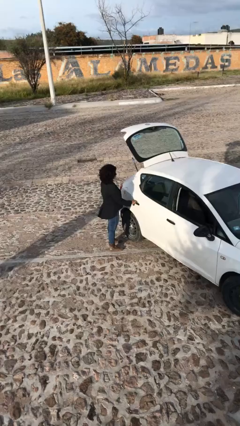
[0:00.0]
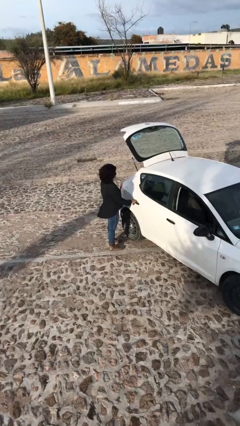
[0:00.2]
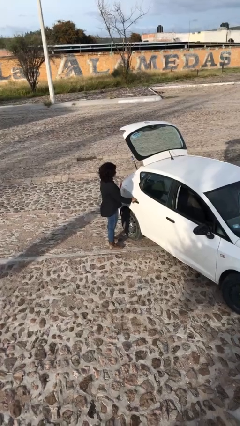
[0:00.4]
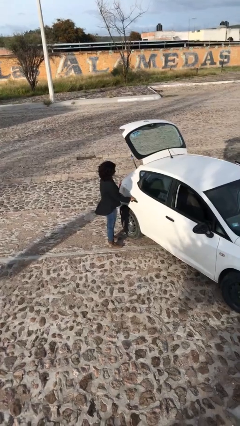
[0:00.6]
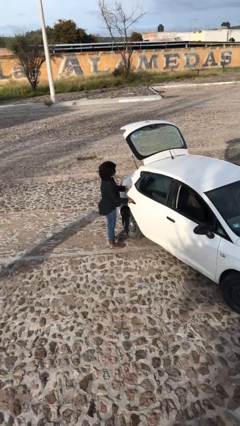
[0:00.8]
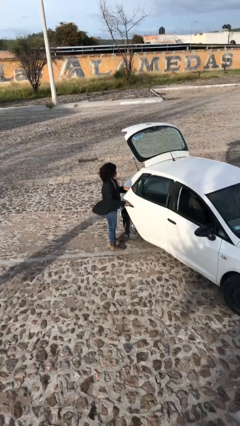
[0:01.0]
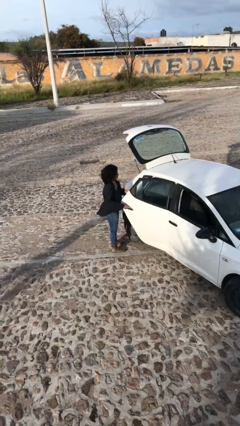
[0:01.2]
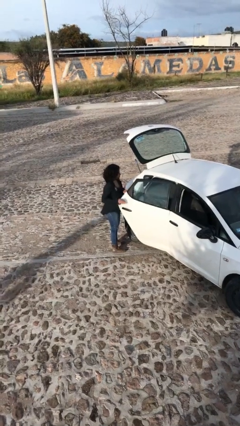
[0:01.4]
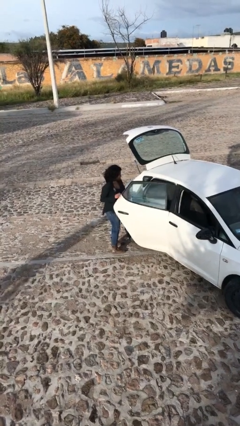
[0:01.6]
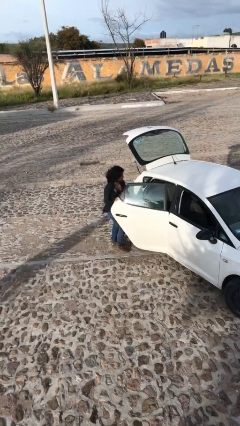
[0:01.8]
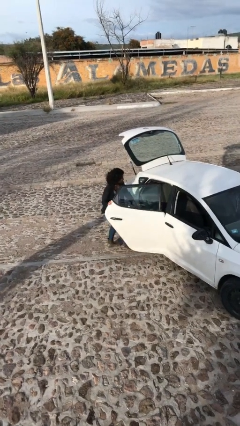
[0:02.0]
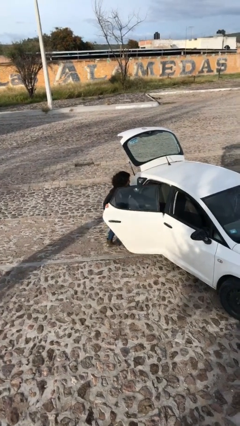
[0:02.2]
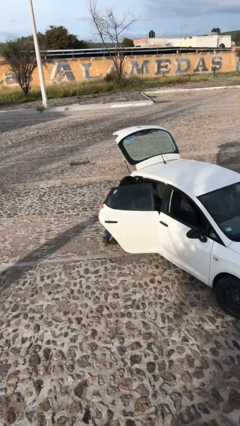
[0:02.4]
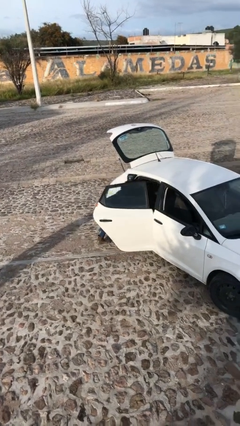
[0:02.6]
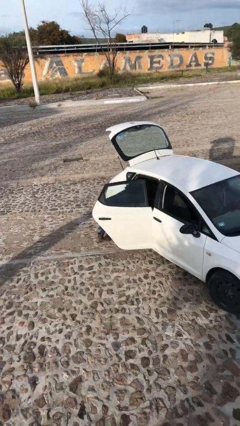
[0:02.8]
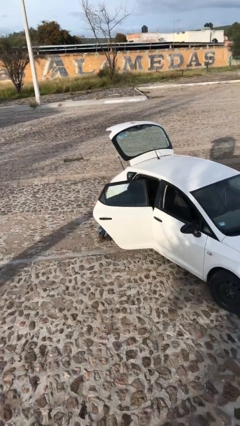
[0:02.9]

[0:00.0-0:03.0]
person opens car door

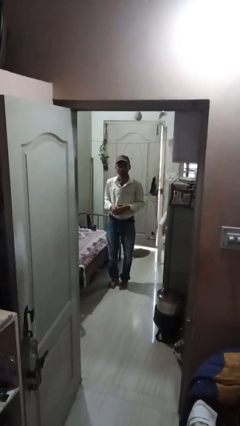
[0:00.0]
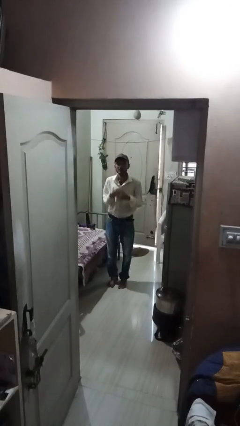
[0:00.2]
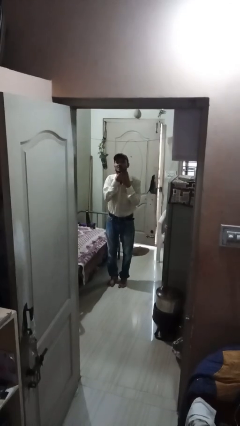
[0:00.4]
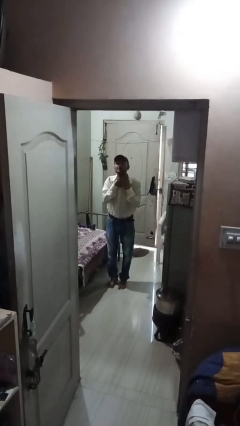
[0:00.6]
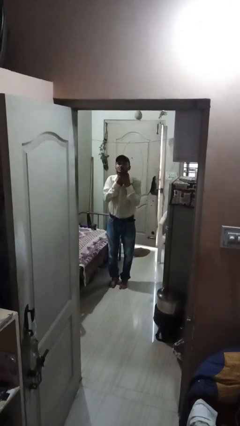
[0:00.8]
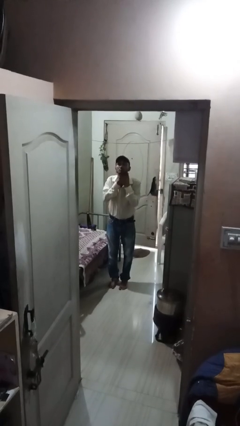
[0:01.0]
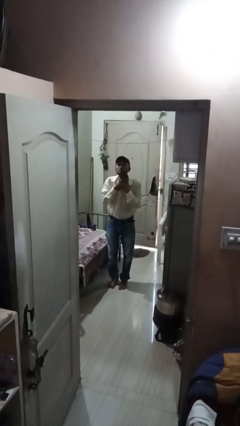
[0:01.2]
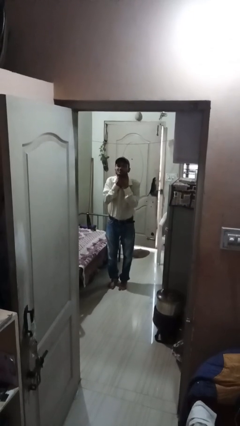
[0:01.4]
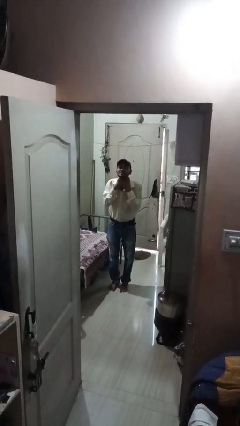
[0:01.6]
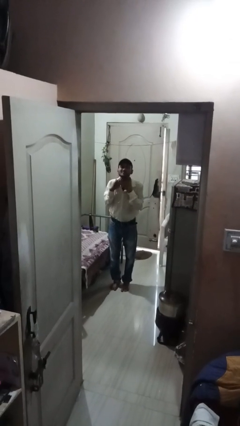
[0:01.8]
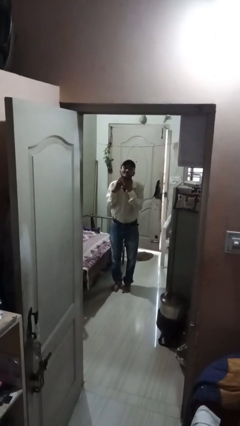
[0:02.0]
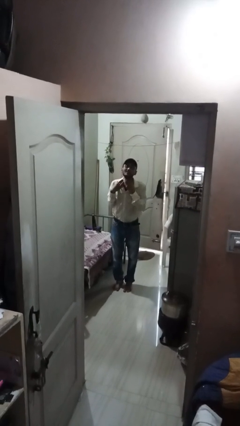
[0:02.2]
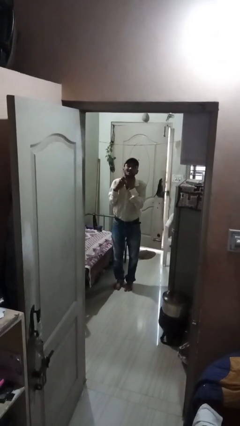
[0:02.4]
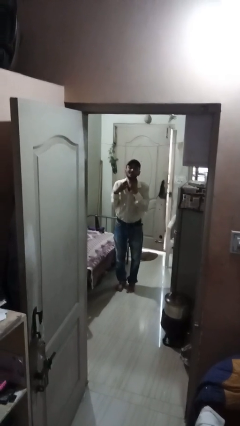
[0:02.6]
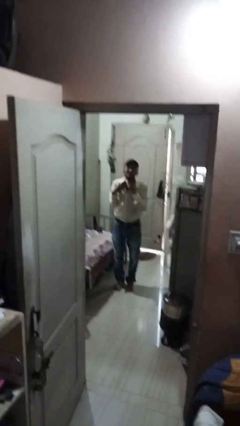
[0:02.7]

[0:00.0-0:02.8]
person rubs neck

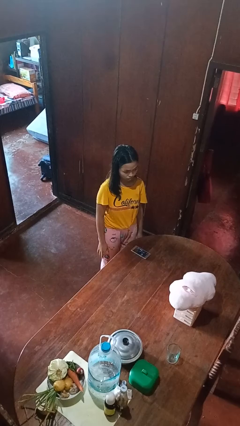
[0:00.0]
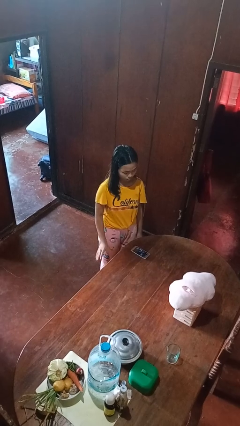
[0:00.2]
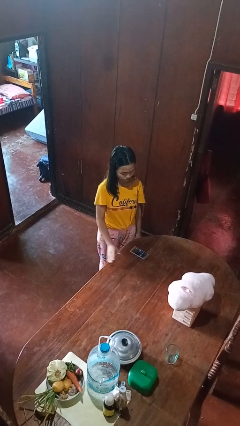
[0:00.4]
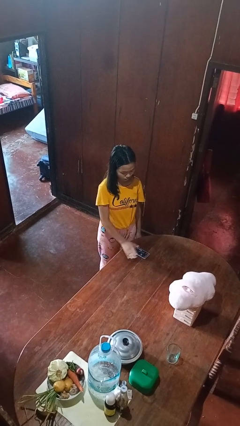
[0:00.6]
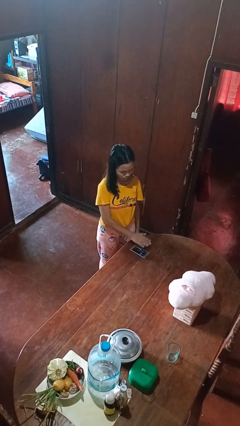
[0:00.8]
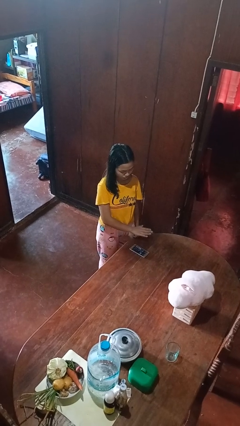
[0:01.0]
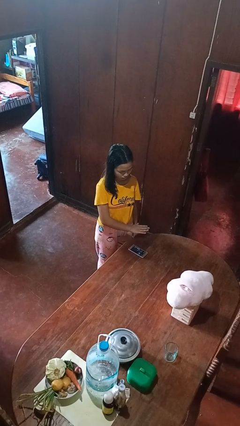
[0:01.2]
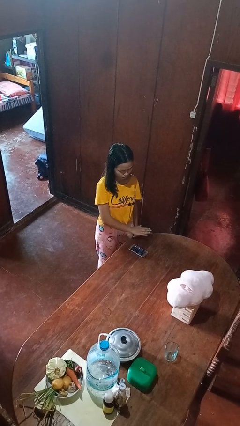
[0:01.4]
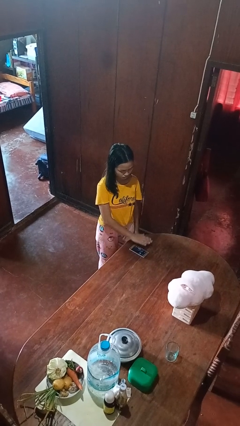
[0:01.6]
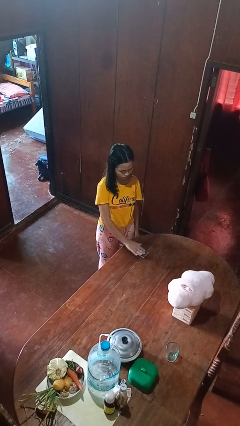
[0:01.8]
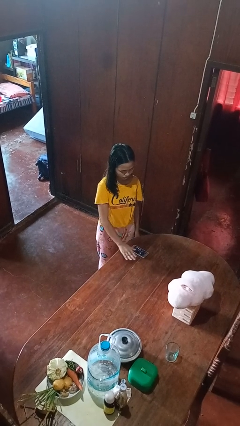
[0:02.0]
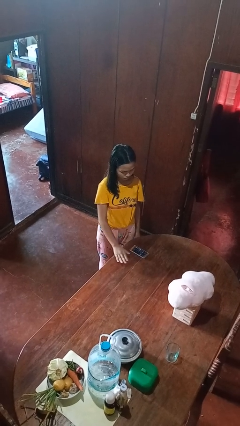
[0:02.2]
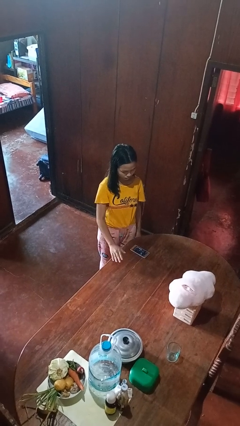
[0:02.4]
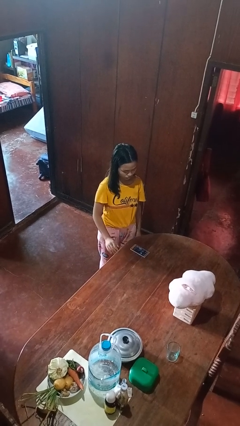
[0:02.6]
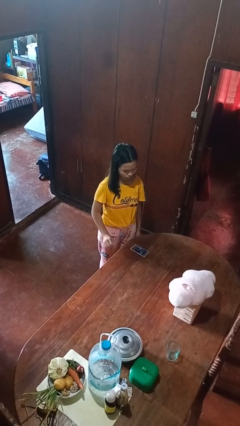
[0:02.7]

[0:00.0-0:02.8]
person waves hand over object

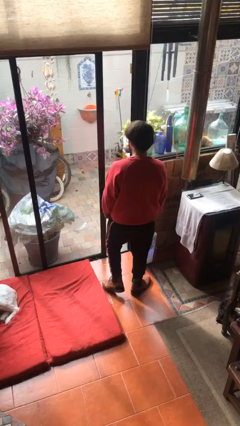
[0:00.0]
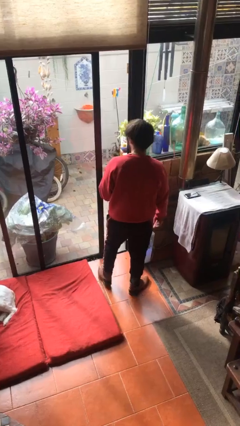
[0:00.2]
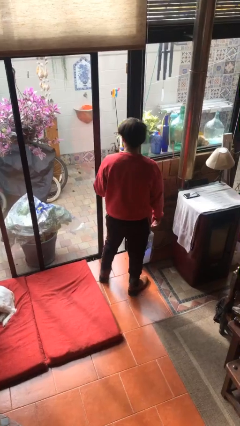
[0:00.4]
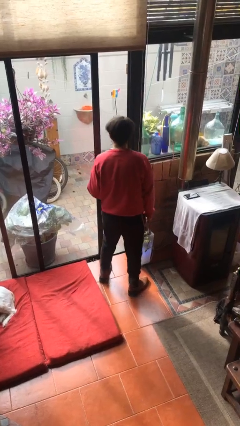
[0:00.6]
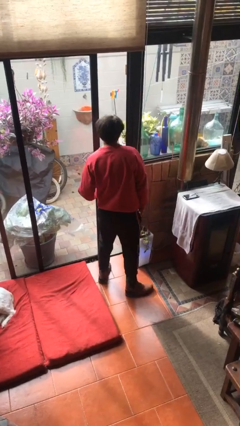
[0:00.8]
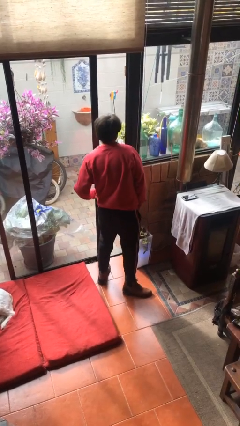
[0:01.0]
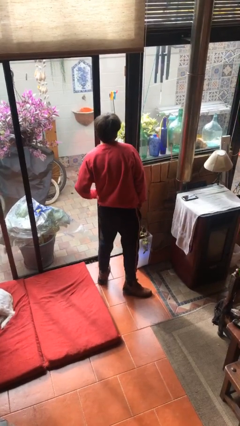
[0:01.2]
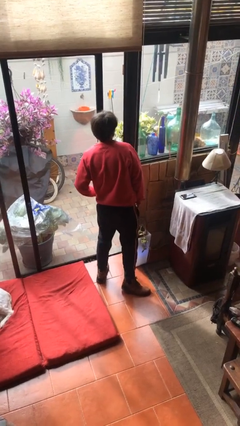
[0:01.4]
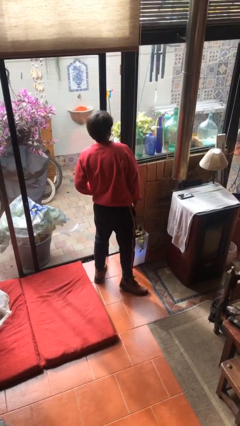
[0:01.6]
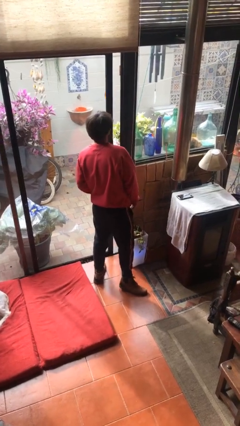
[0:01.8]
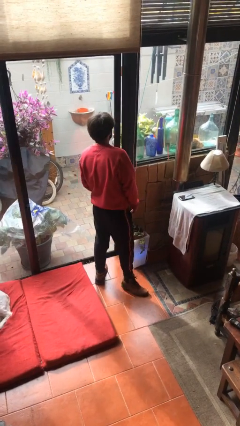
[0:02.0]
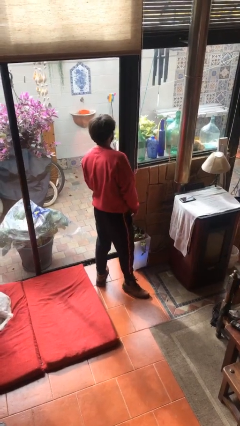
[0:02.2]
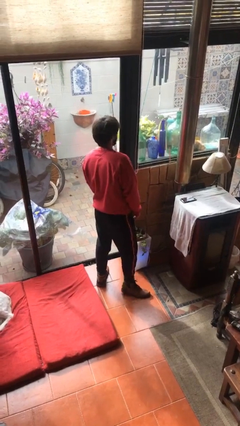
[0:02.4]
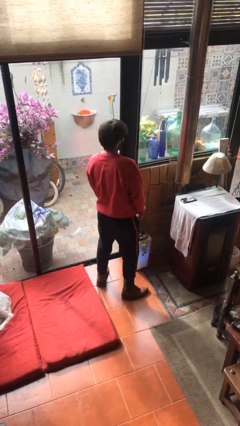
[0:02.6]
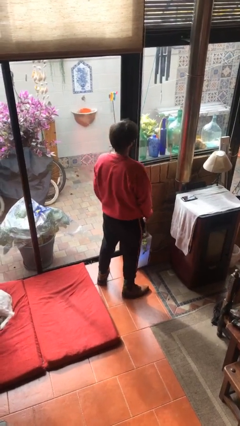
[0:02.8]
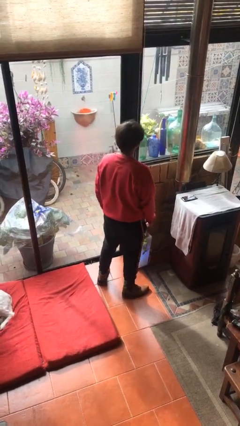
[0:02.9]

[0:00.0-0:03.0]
person closes sliding door

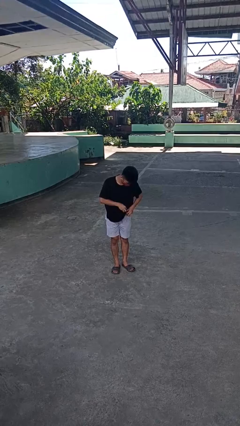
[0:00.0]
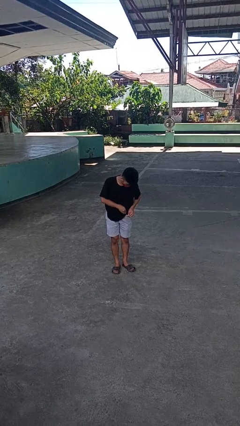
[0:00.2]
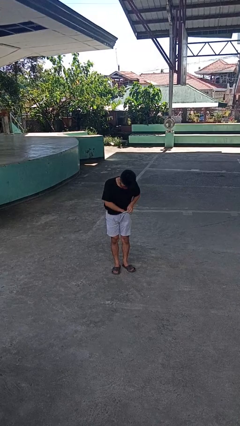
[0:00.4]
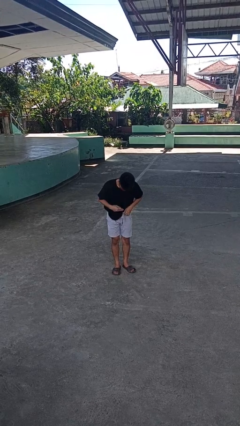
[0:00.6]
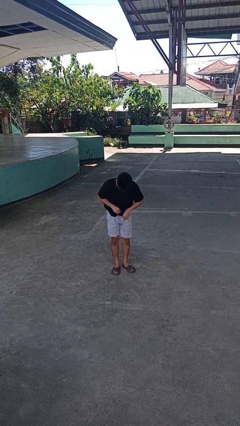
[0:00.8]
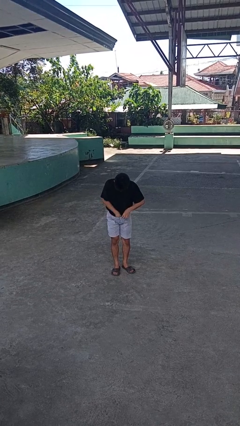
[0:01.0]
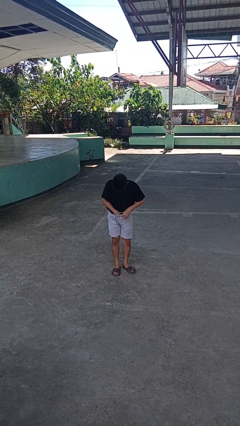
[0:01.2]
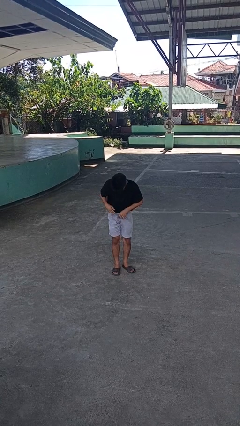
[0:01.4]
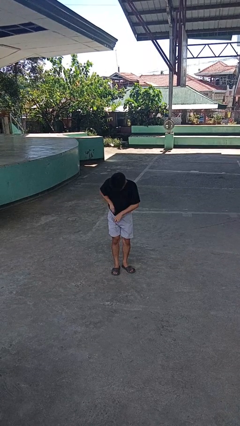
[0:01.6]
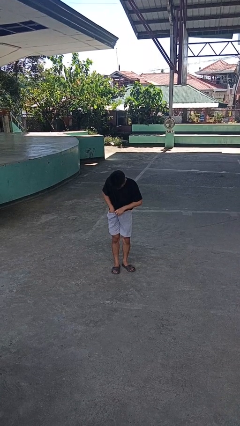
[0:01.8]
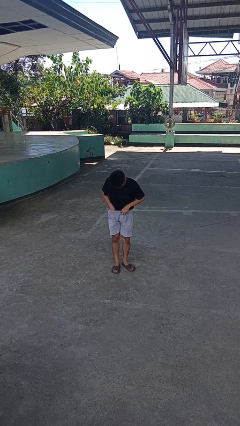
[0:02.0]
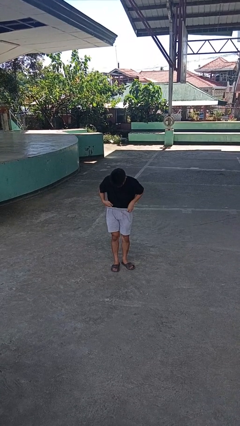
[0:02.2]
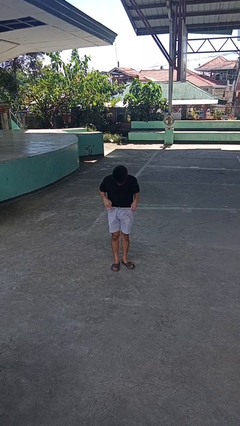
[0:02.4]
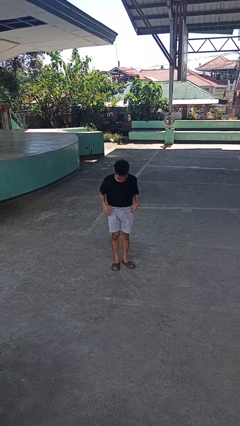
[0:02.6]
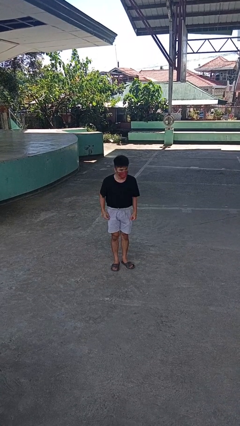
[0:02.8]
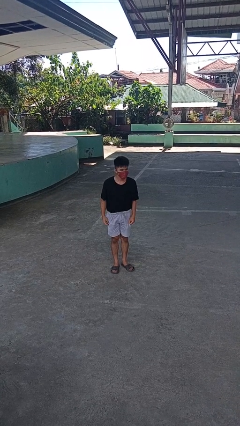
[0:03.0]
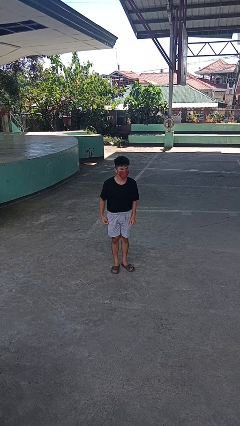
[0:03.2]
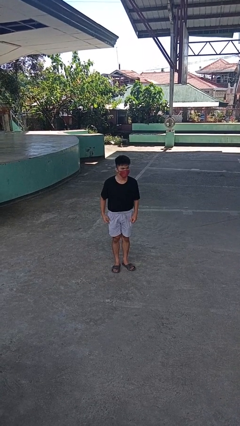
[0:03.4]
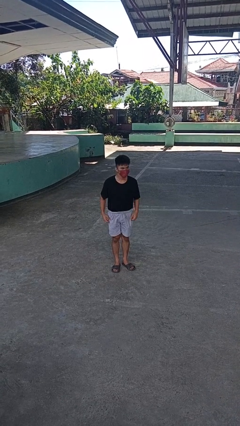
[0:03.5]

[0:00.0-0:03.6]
person tucks in shirt

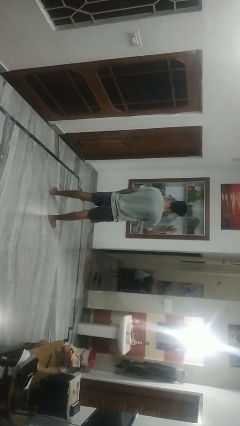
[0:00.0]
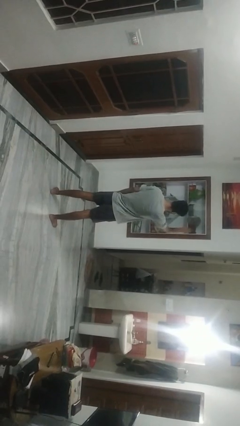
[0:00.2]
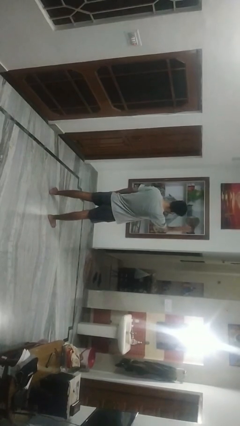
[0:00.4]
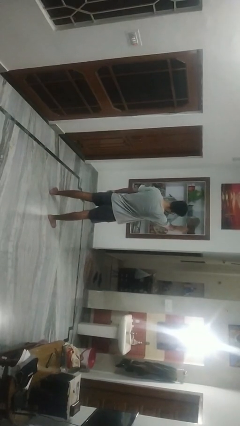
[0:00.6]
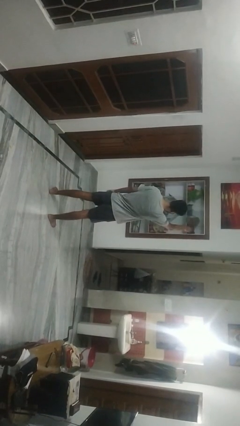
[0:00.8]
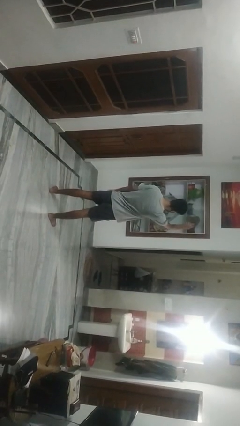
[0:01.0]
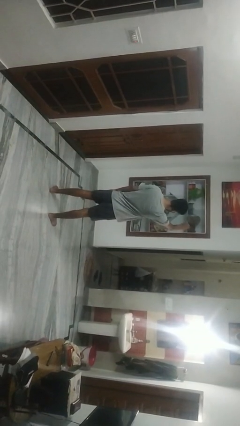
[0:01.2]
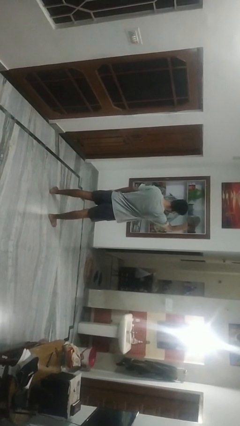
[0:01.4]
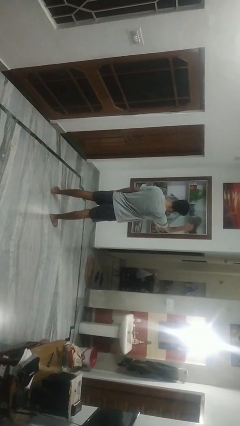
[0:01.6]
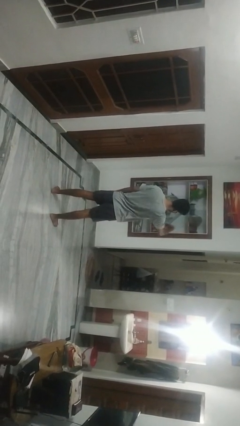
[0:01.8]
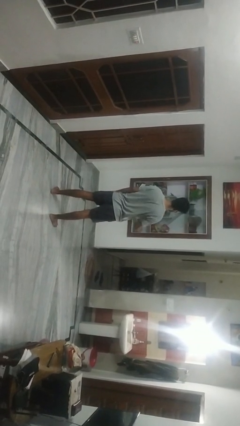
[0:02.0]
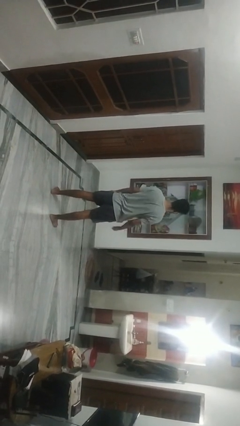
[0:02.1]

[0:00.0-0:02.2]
person gestures come here

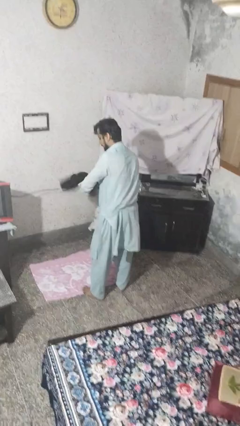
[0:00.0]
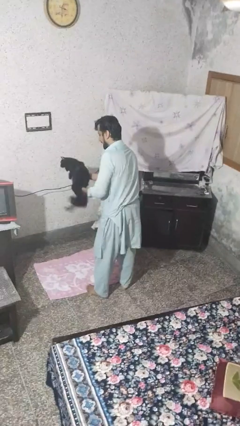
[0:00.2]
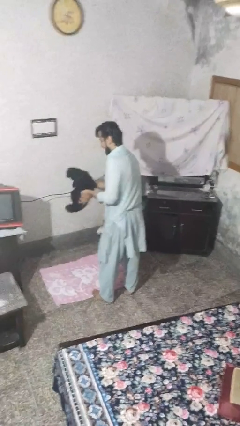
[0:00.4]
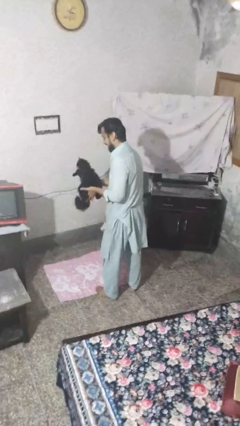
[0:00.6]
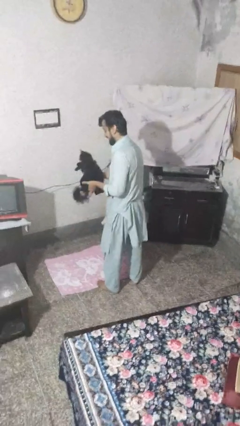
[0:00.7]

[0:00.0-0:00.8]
person pets cat
